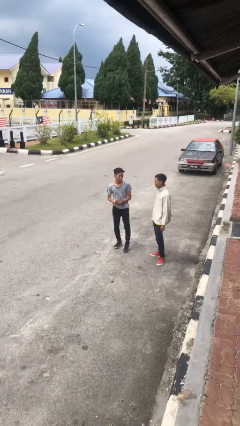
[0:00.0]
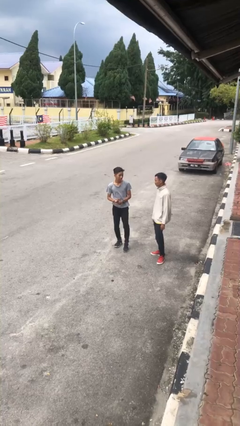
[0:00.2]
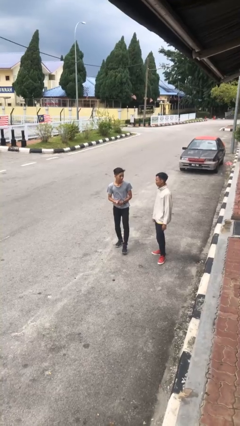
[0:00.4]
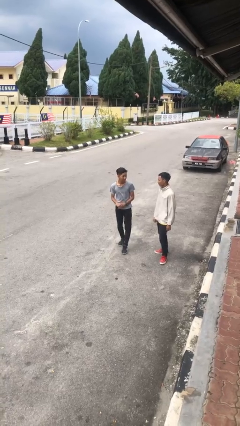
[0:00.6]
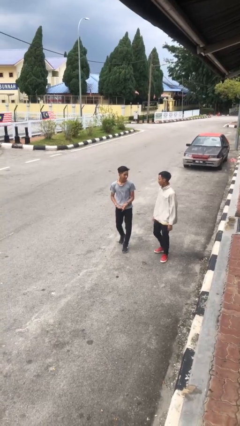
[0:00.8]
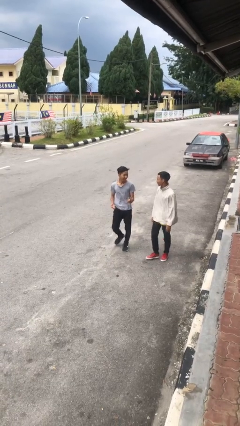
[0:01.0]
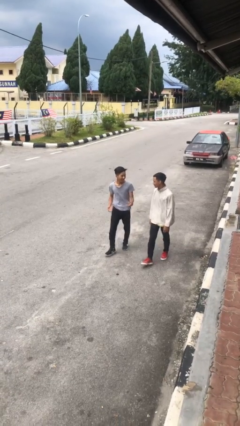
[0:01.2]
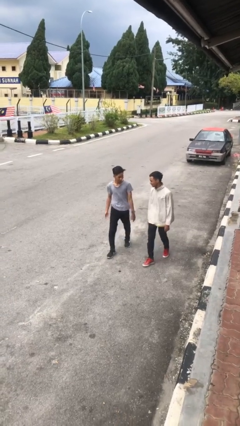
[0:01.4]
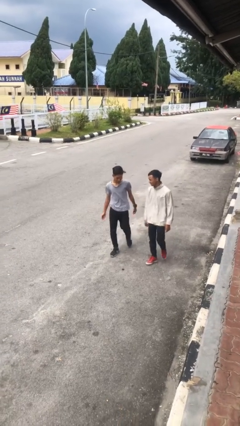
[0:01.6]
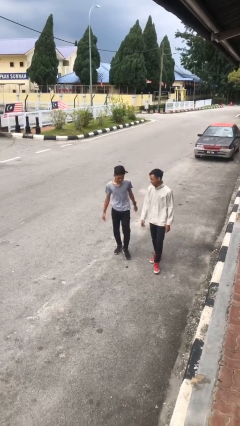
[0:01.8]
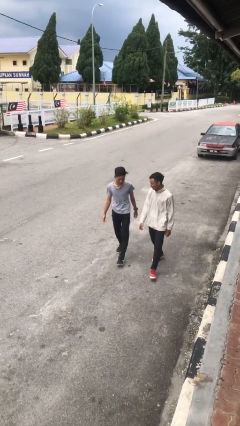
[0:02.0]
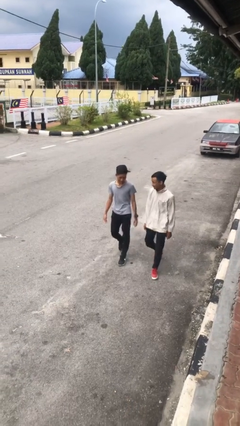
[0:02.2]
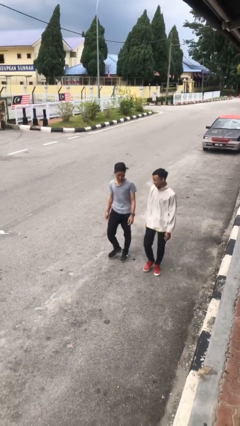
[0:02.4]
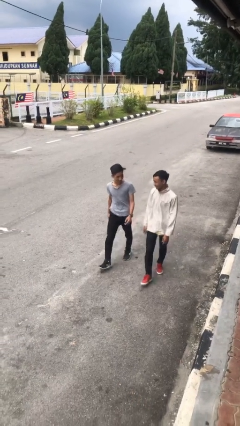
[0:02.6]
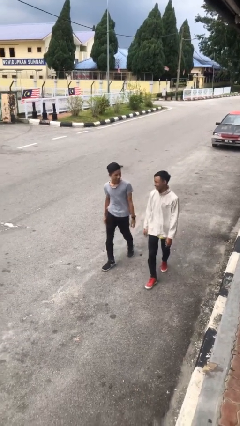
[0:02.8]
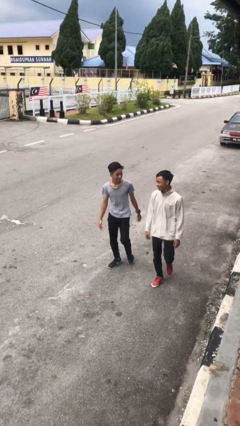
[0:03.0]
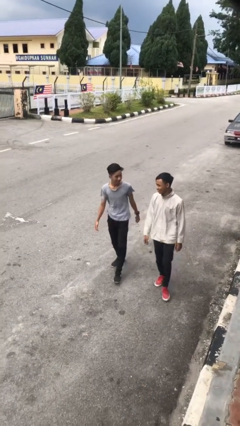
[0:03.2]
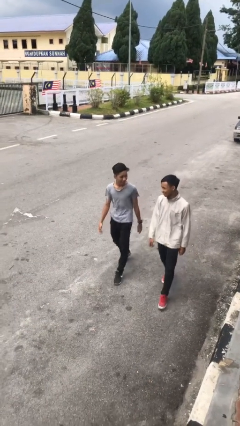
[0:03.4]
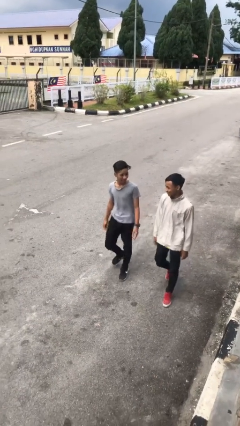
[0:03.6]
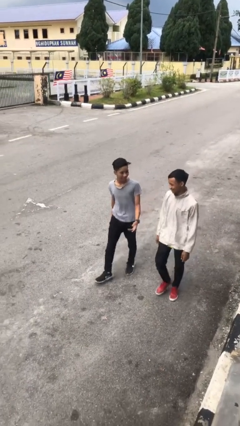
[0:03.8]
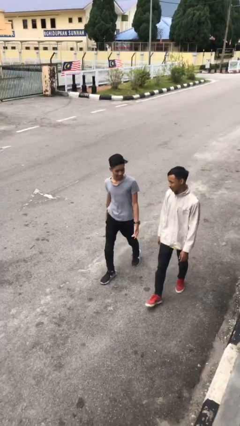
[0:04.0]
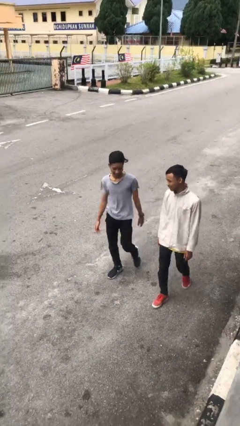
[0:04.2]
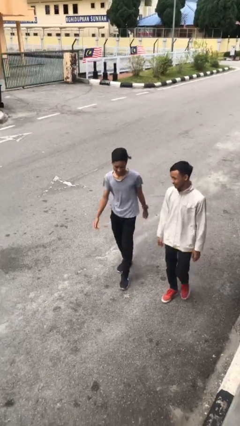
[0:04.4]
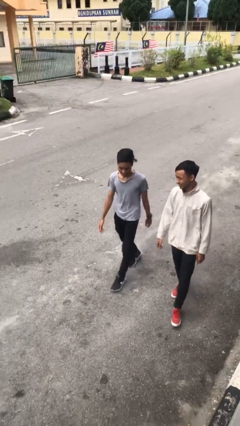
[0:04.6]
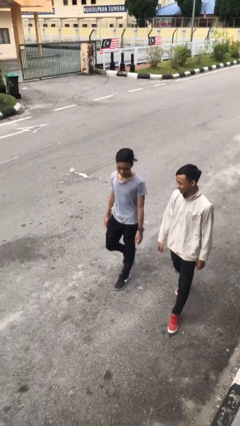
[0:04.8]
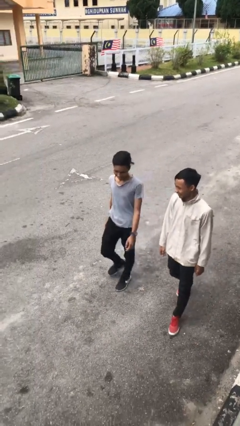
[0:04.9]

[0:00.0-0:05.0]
person talks to person

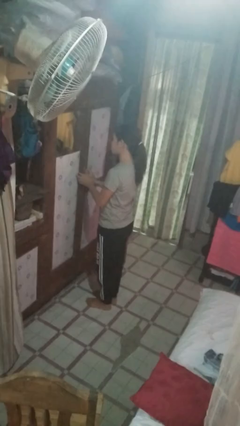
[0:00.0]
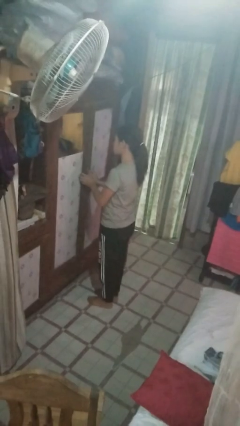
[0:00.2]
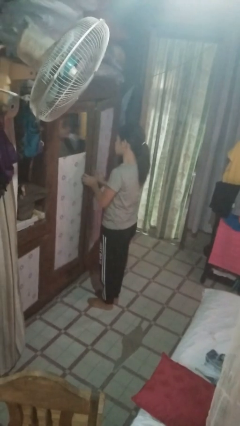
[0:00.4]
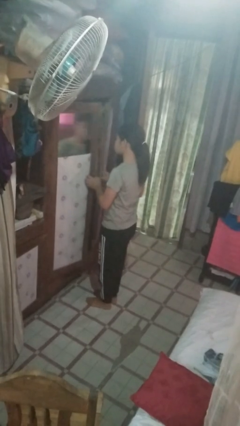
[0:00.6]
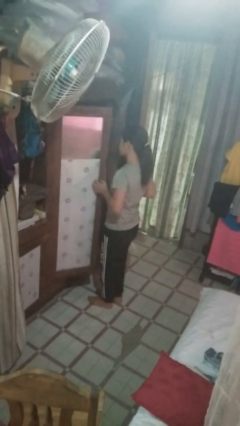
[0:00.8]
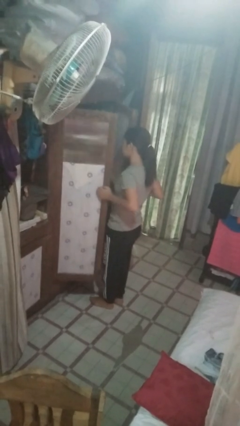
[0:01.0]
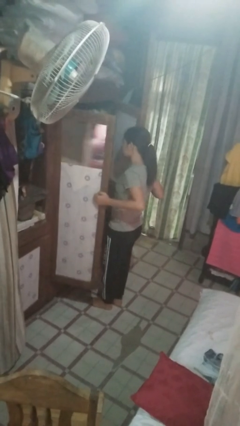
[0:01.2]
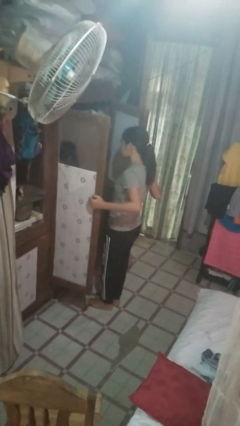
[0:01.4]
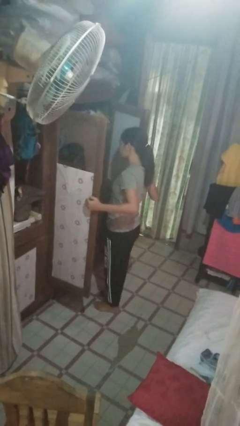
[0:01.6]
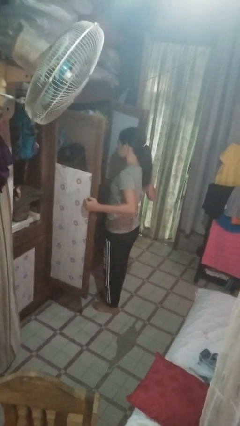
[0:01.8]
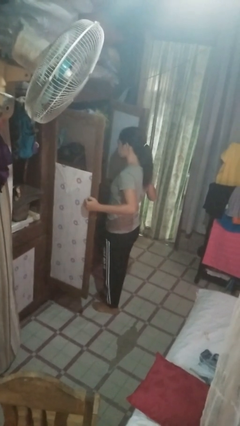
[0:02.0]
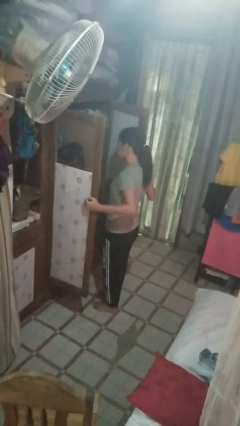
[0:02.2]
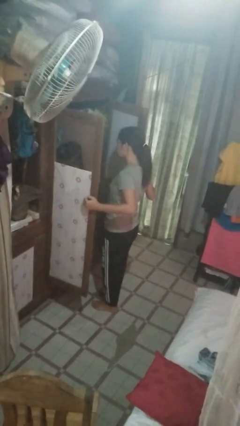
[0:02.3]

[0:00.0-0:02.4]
person opens closet door

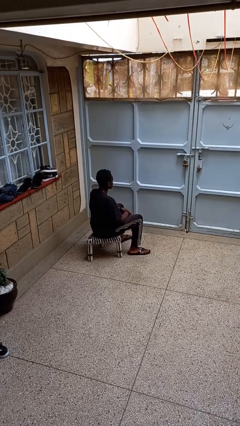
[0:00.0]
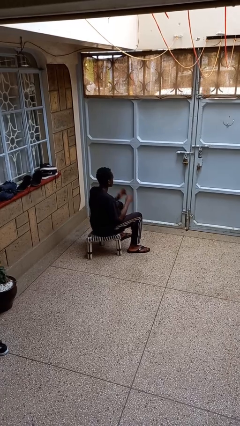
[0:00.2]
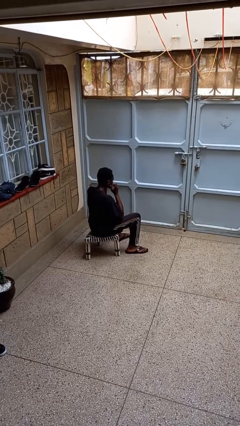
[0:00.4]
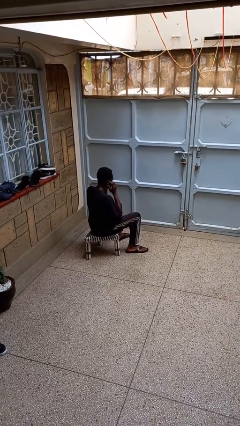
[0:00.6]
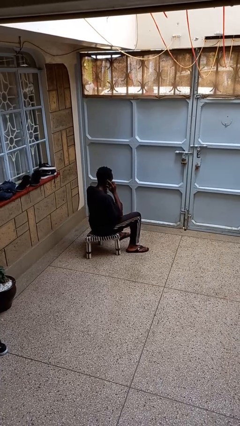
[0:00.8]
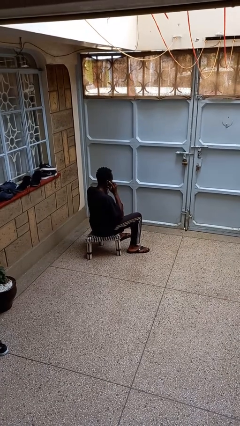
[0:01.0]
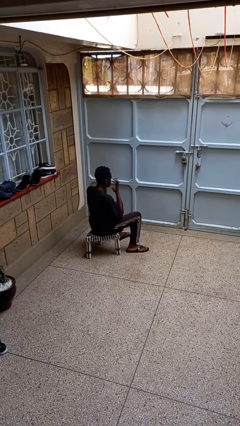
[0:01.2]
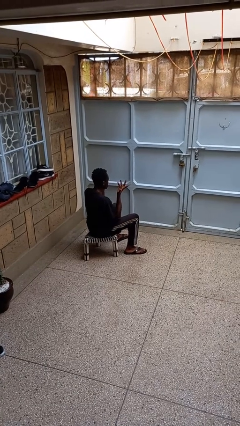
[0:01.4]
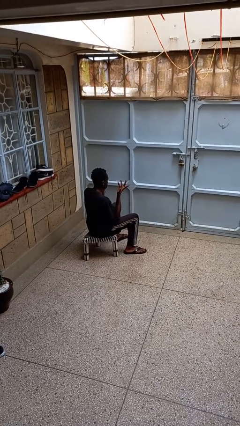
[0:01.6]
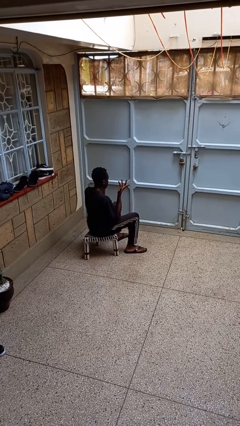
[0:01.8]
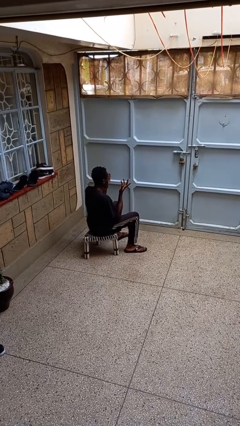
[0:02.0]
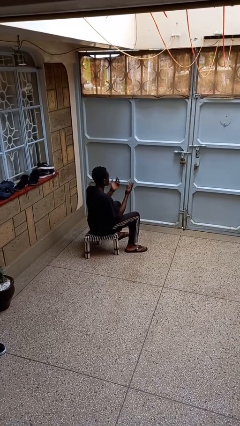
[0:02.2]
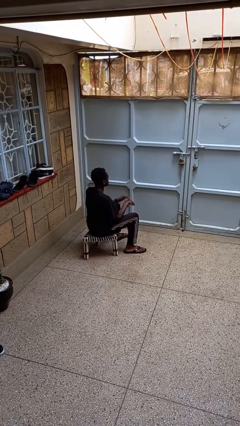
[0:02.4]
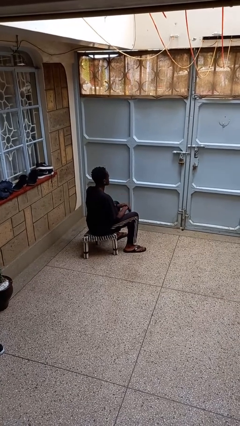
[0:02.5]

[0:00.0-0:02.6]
person puts fingers in ear

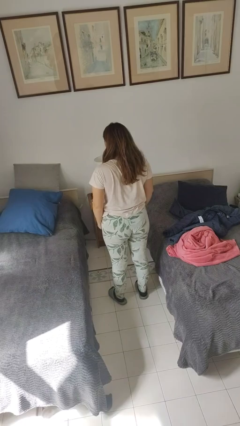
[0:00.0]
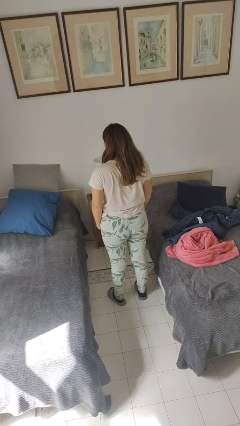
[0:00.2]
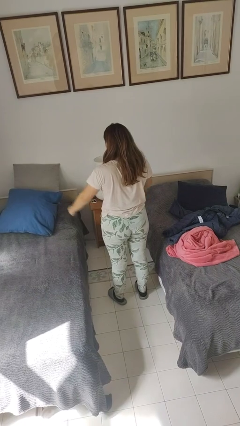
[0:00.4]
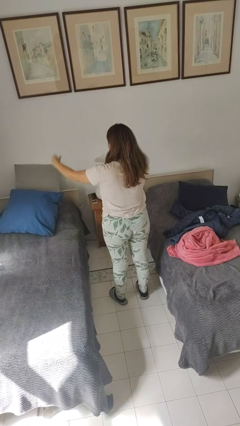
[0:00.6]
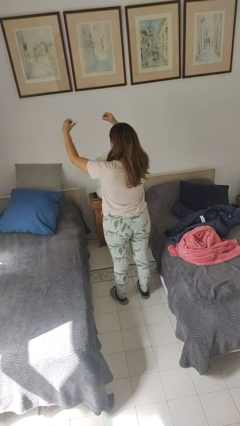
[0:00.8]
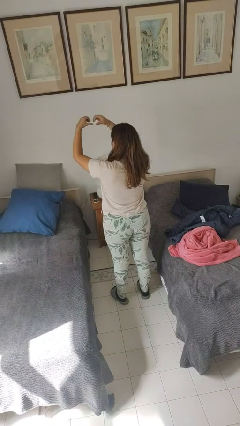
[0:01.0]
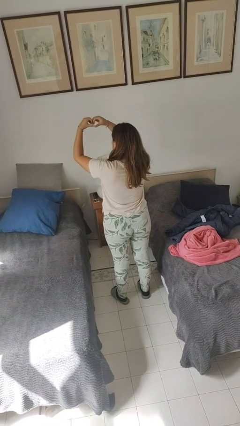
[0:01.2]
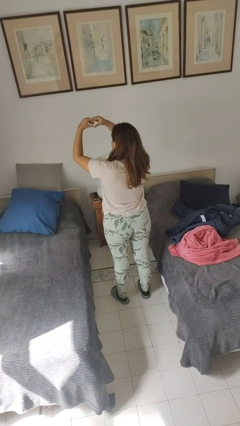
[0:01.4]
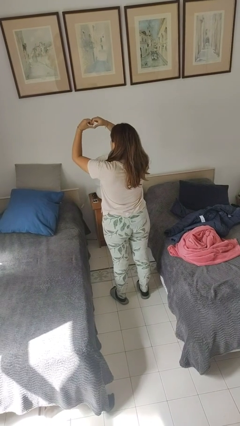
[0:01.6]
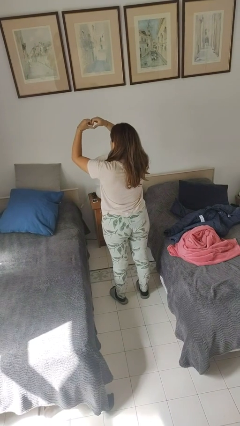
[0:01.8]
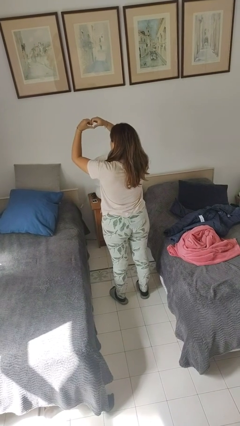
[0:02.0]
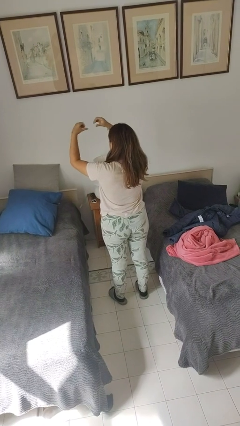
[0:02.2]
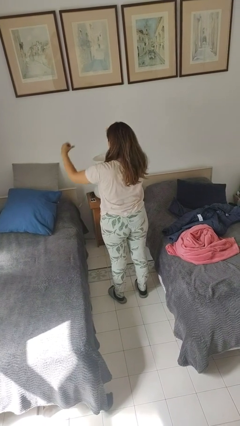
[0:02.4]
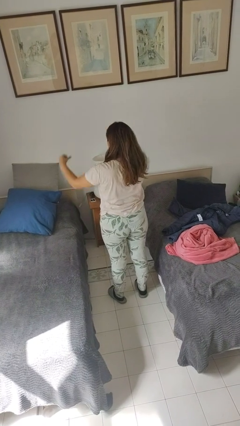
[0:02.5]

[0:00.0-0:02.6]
person gestures heart

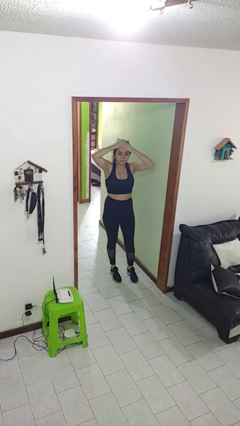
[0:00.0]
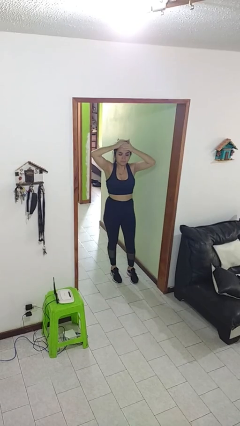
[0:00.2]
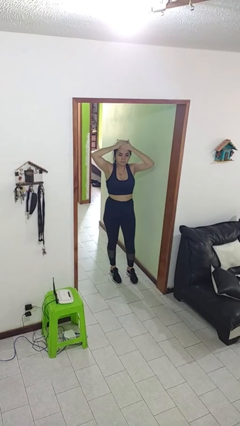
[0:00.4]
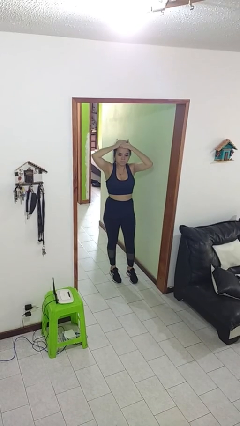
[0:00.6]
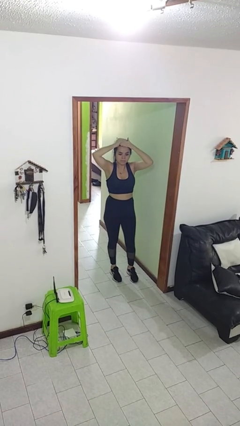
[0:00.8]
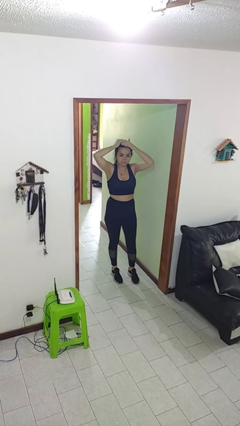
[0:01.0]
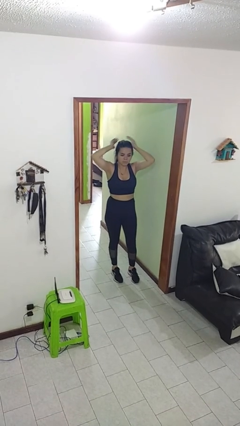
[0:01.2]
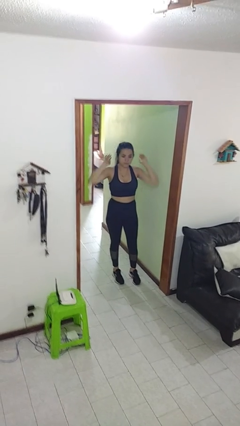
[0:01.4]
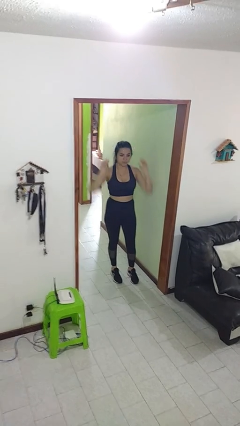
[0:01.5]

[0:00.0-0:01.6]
person covers face with hands

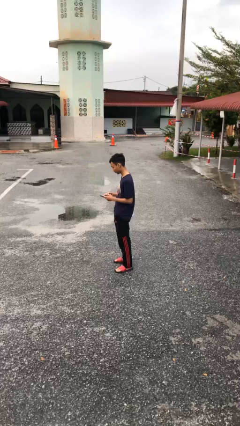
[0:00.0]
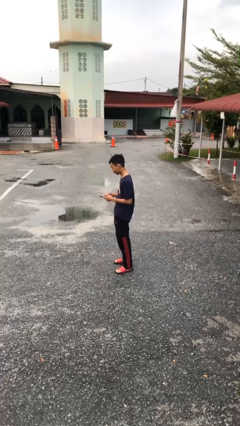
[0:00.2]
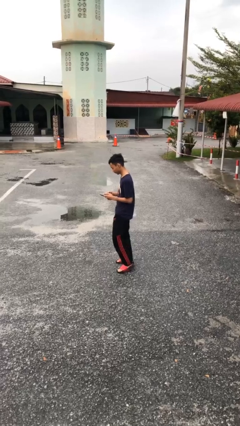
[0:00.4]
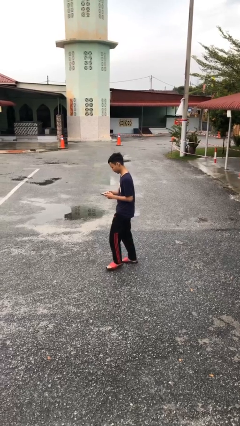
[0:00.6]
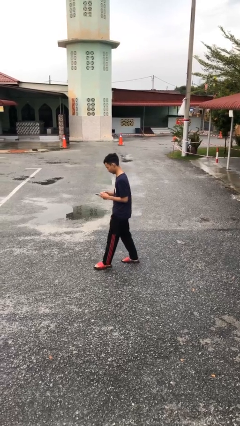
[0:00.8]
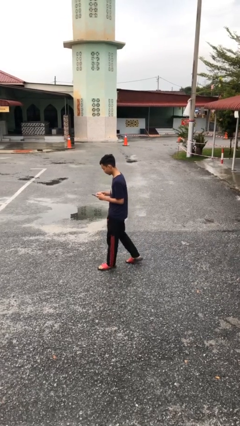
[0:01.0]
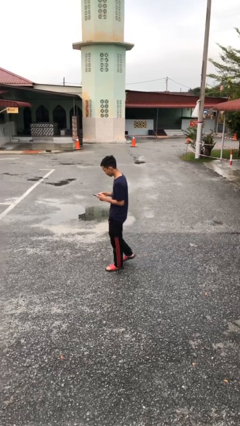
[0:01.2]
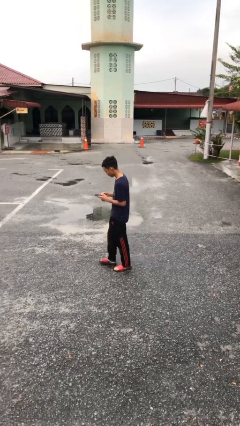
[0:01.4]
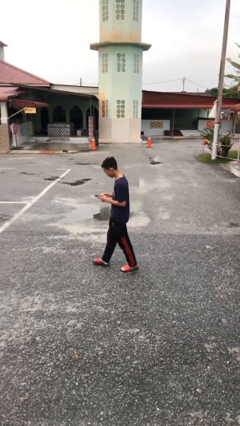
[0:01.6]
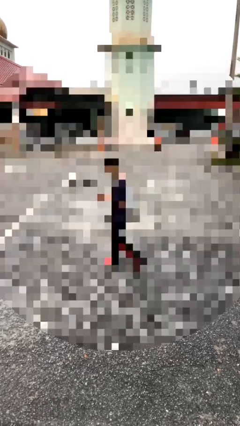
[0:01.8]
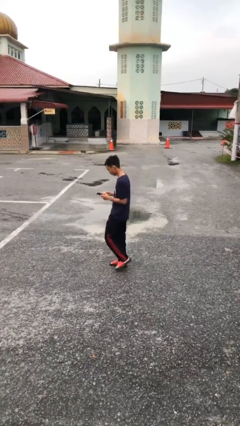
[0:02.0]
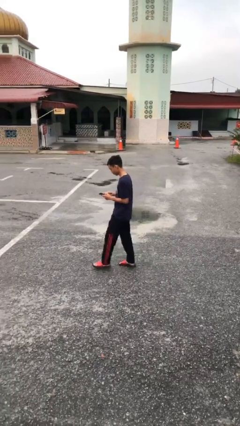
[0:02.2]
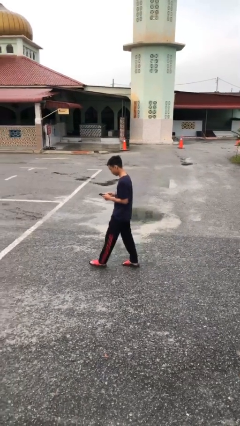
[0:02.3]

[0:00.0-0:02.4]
person texts on phone

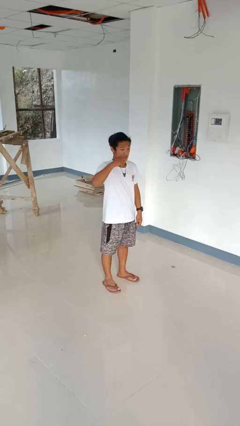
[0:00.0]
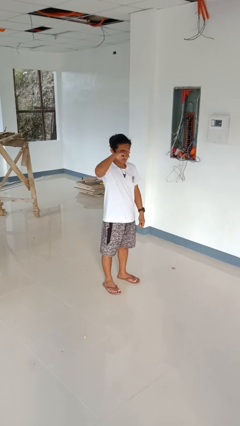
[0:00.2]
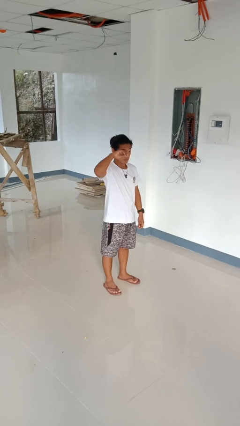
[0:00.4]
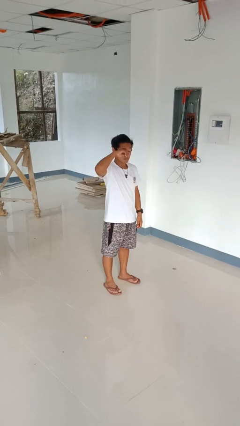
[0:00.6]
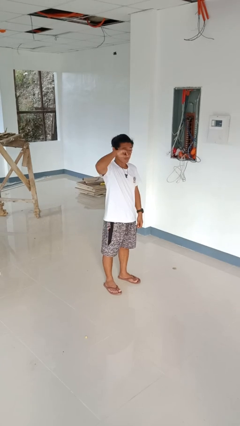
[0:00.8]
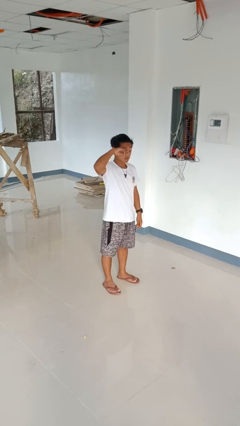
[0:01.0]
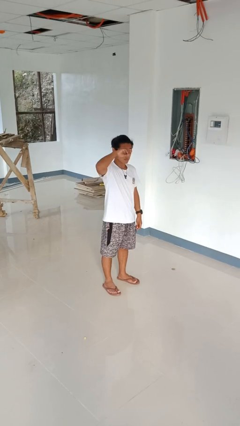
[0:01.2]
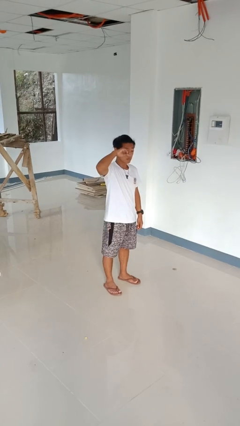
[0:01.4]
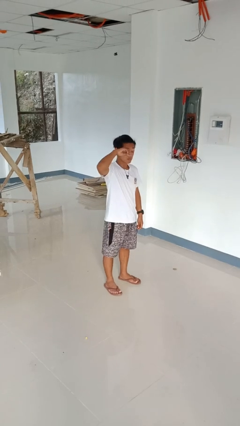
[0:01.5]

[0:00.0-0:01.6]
person rubs eyes
